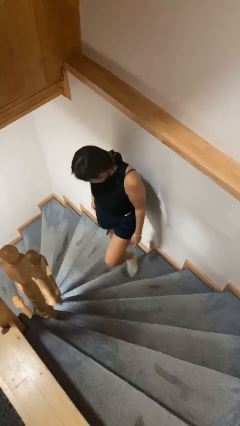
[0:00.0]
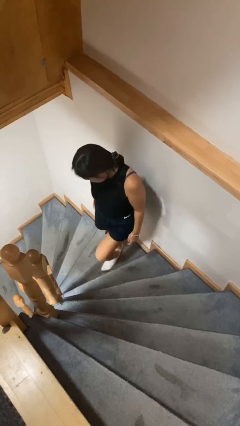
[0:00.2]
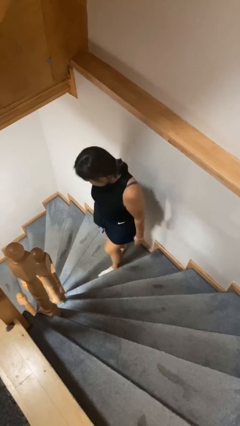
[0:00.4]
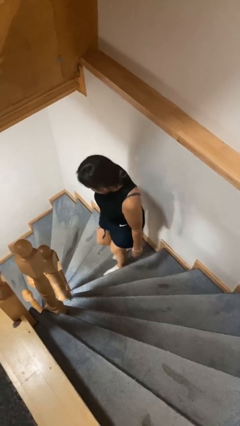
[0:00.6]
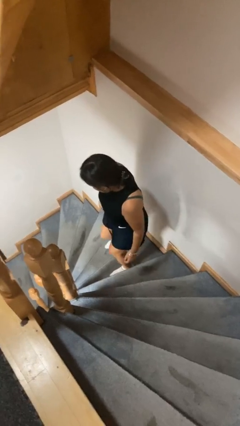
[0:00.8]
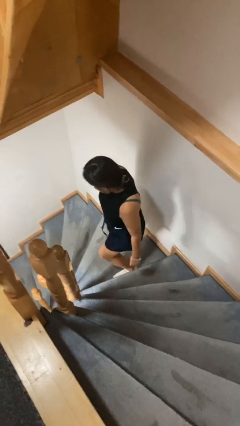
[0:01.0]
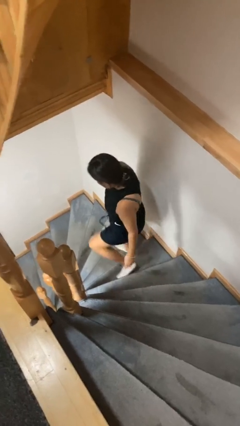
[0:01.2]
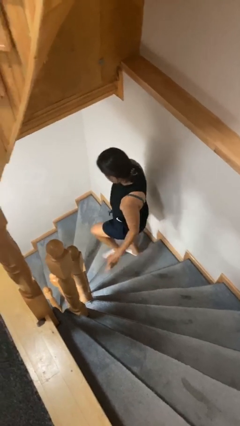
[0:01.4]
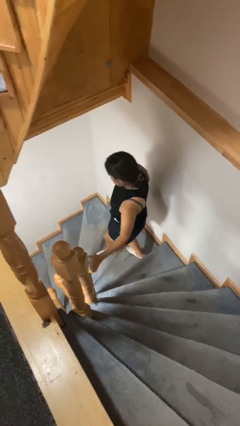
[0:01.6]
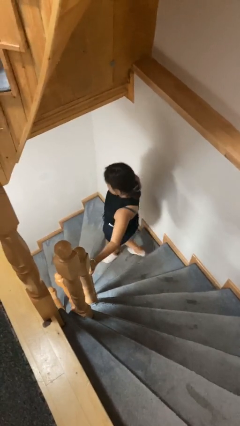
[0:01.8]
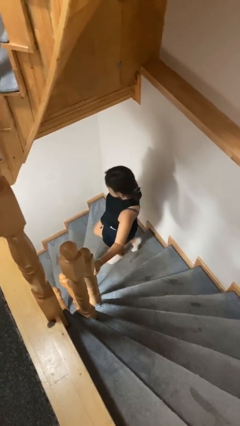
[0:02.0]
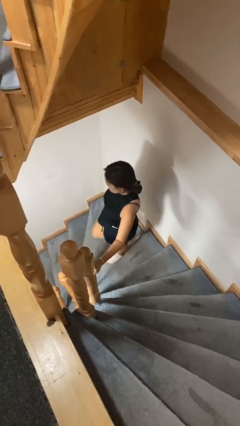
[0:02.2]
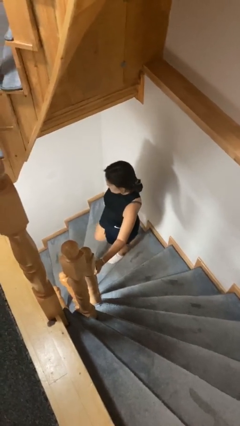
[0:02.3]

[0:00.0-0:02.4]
person climbs down stairs

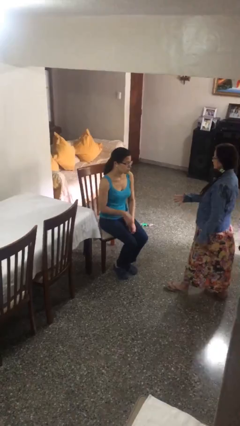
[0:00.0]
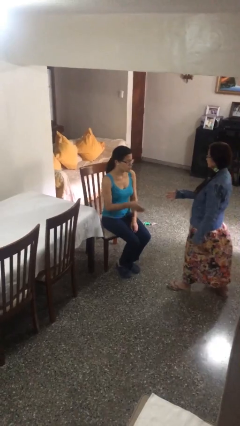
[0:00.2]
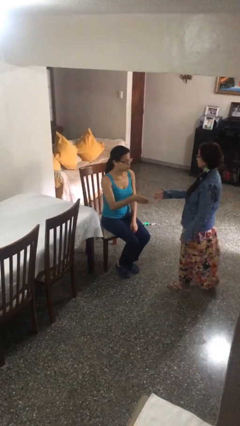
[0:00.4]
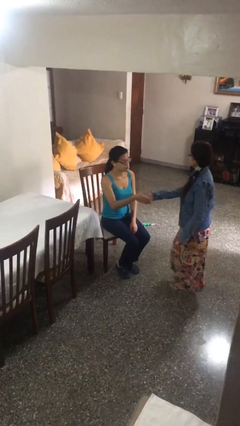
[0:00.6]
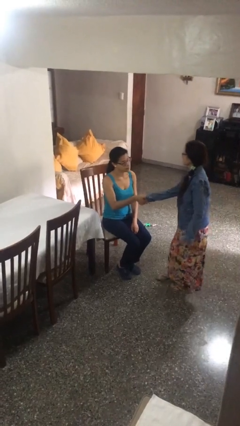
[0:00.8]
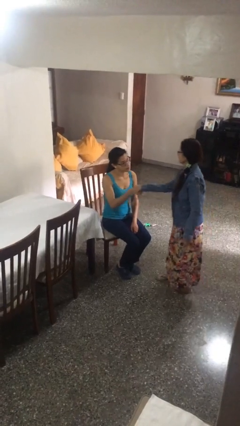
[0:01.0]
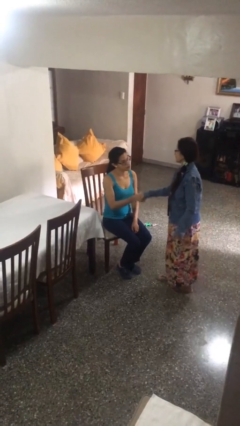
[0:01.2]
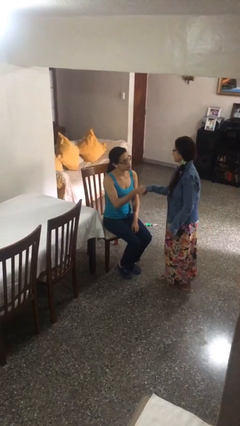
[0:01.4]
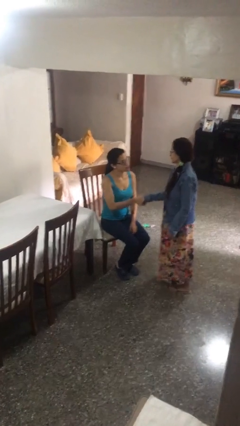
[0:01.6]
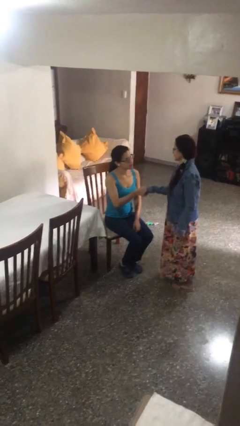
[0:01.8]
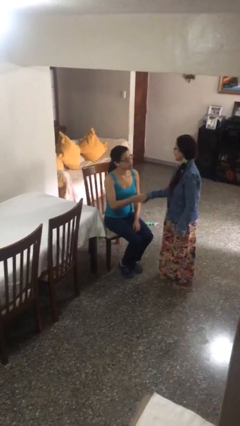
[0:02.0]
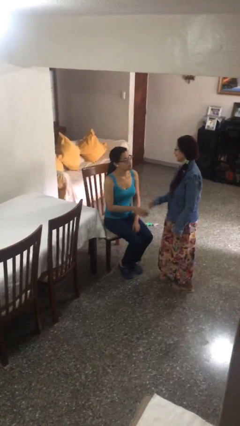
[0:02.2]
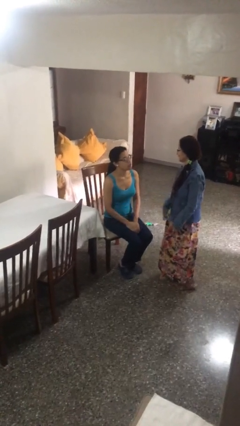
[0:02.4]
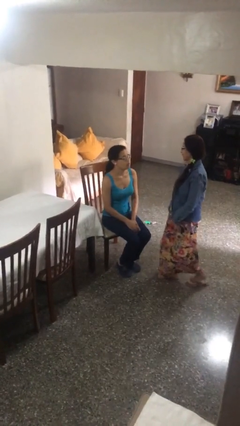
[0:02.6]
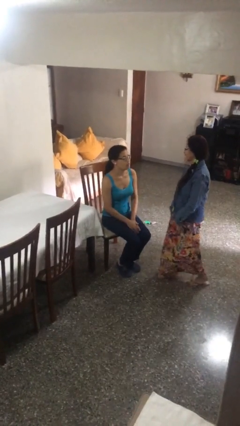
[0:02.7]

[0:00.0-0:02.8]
person shakes hand

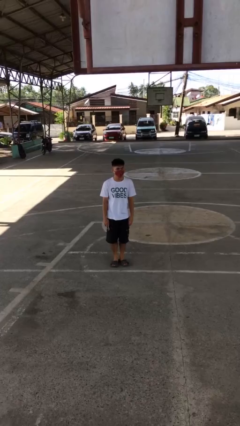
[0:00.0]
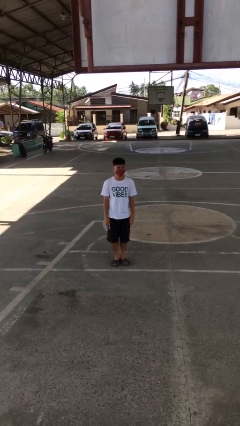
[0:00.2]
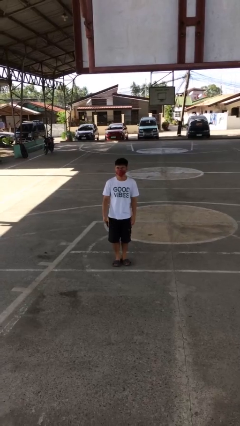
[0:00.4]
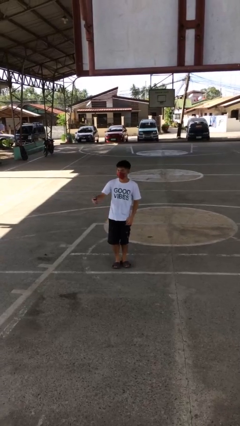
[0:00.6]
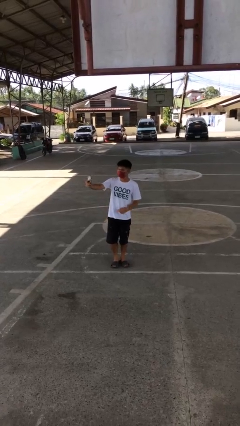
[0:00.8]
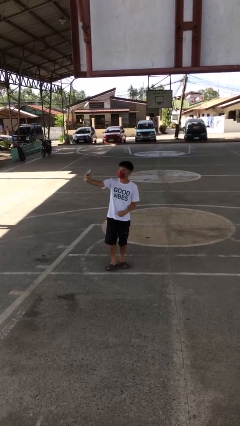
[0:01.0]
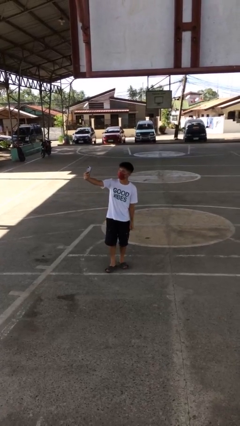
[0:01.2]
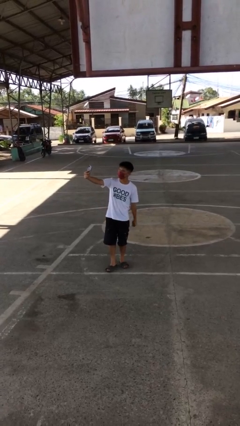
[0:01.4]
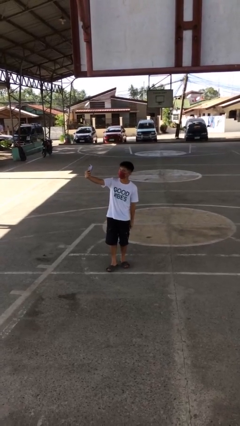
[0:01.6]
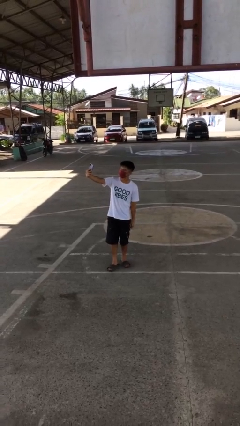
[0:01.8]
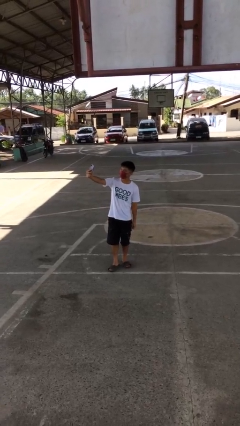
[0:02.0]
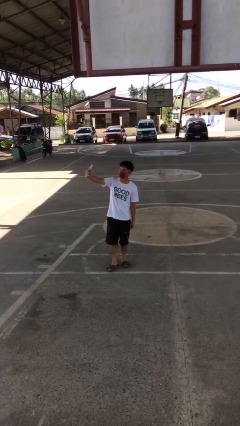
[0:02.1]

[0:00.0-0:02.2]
person takes selfie

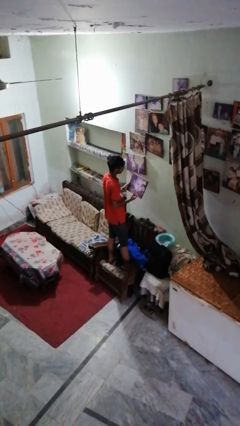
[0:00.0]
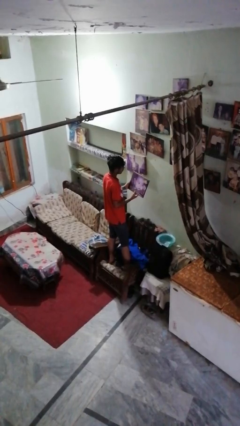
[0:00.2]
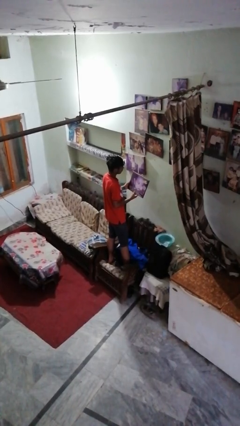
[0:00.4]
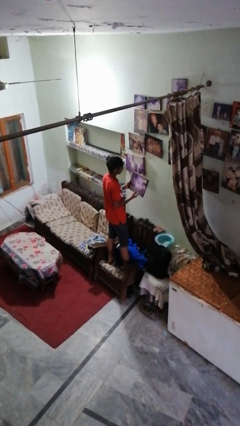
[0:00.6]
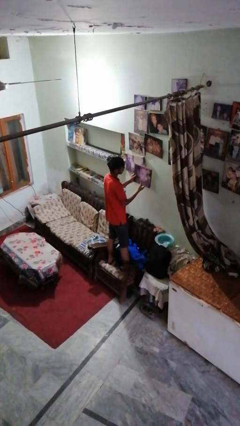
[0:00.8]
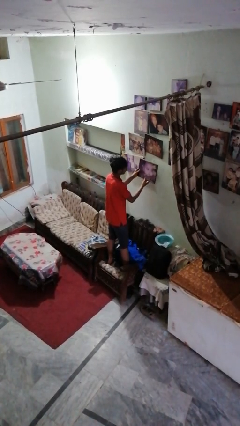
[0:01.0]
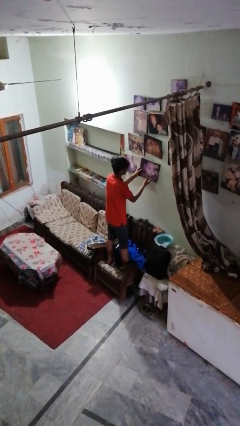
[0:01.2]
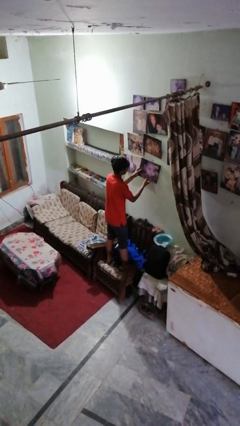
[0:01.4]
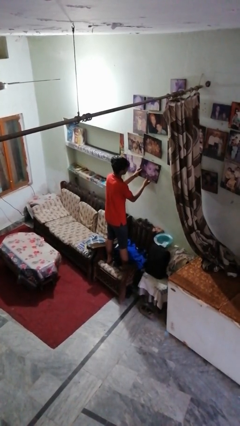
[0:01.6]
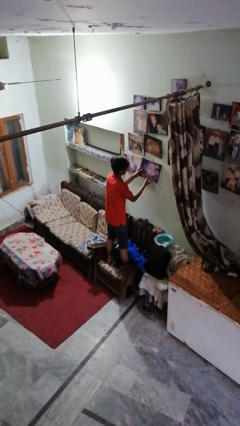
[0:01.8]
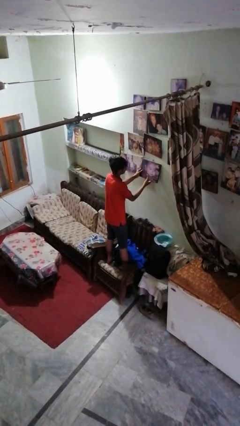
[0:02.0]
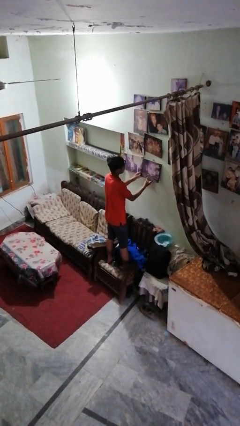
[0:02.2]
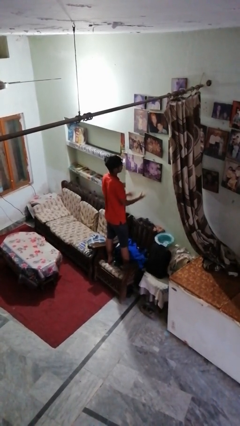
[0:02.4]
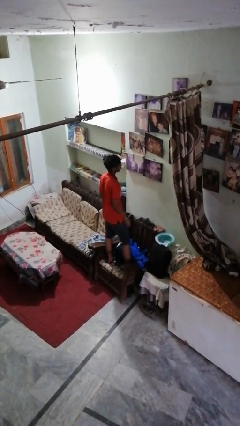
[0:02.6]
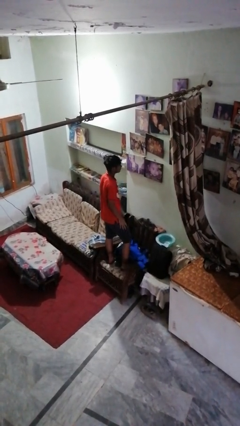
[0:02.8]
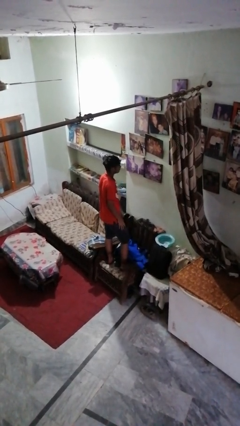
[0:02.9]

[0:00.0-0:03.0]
person puts up picture frame

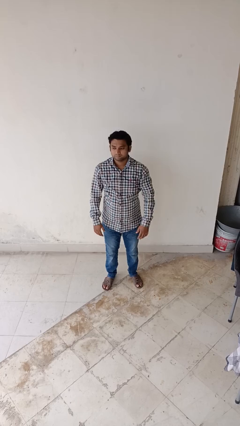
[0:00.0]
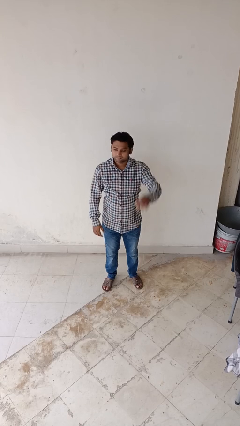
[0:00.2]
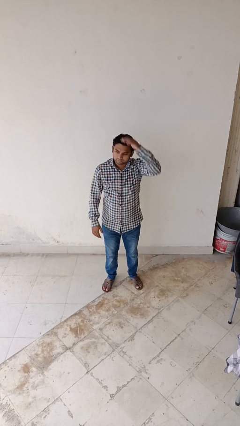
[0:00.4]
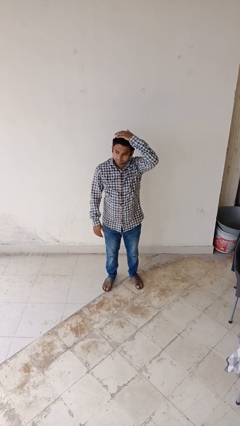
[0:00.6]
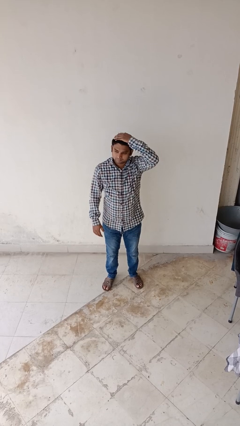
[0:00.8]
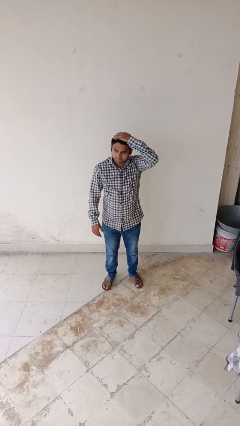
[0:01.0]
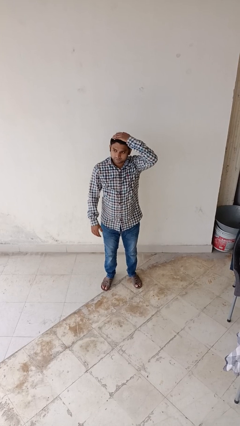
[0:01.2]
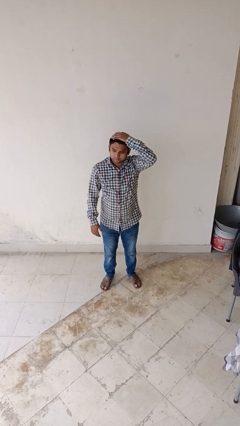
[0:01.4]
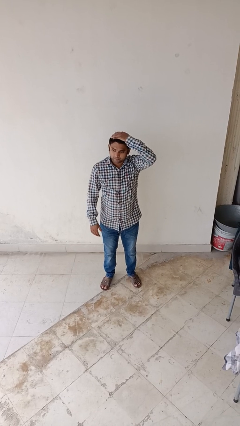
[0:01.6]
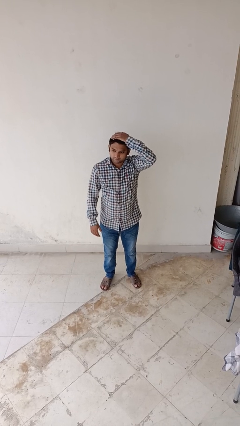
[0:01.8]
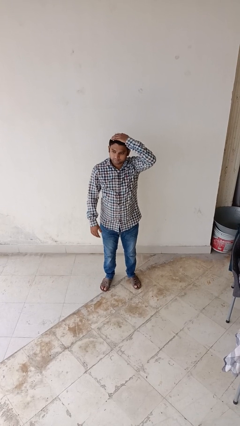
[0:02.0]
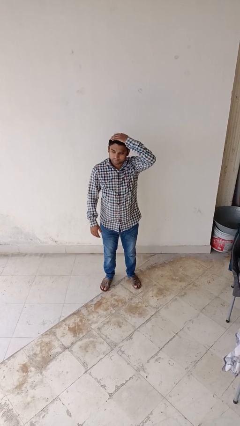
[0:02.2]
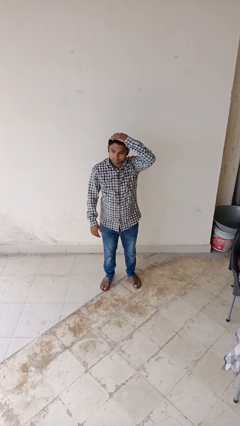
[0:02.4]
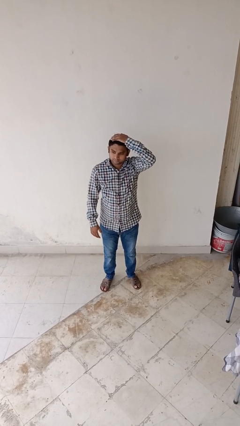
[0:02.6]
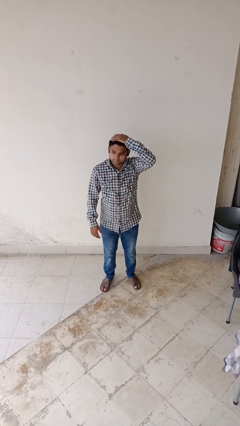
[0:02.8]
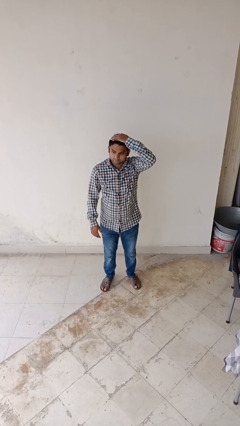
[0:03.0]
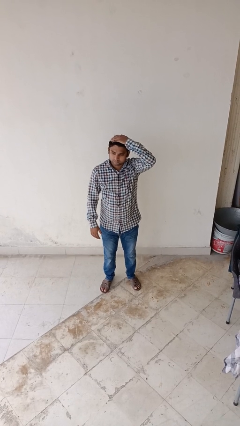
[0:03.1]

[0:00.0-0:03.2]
person pats head

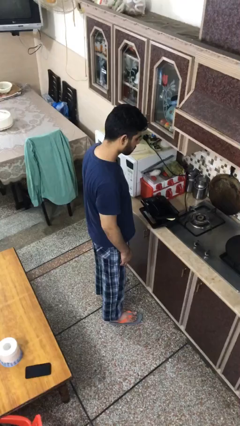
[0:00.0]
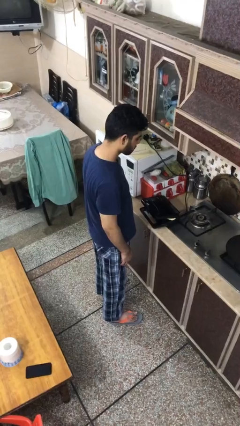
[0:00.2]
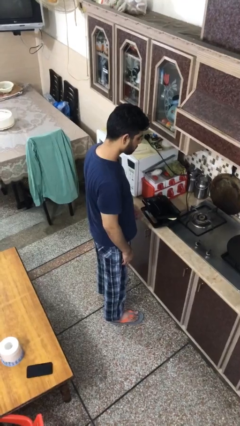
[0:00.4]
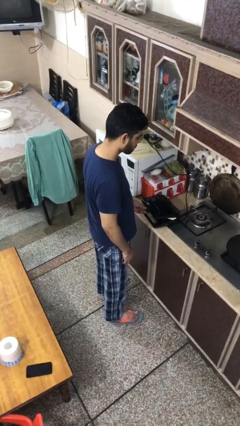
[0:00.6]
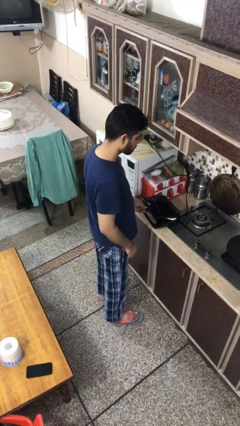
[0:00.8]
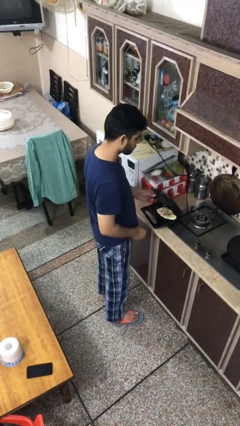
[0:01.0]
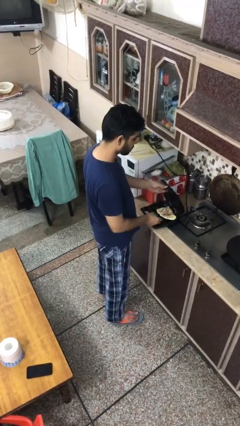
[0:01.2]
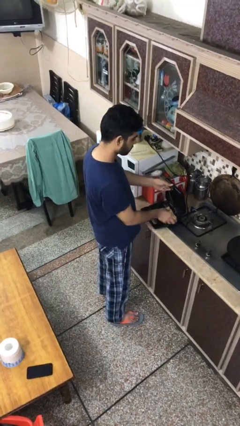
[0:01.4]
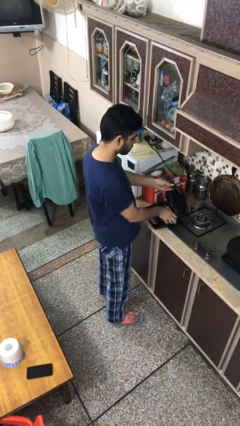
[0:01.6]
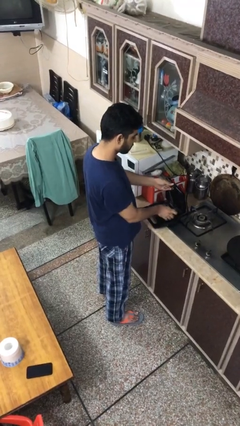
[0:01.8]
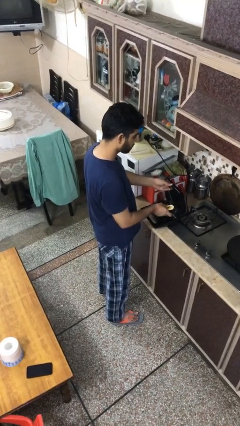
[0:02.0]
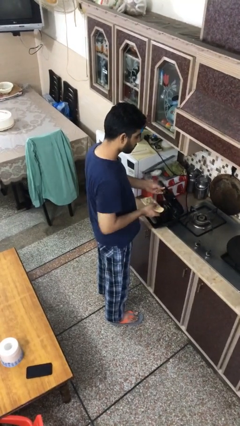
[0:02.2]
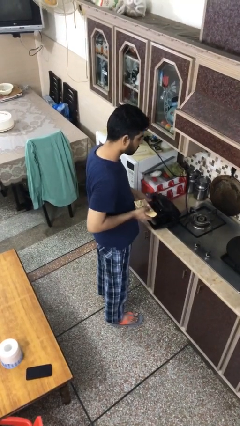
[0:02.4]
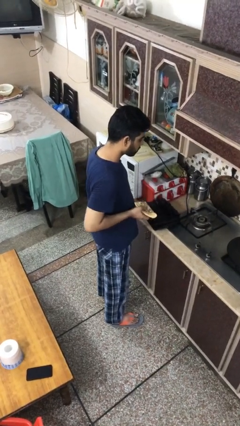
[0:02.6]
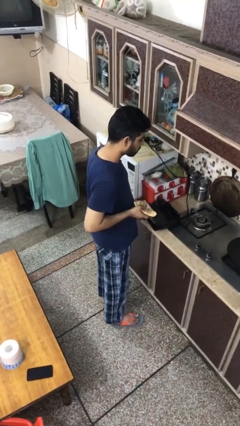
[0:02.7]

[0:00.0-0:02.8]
person takes object from toaster

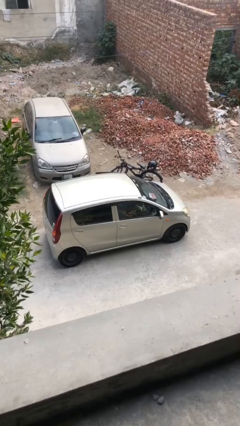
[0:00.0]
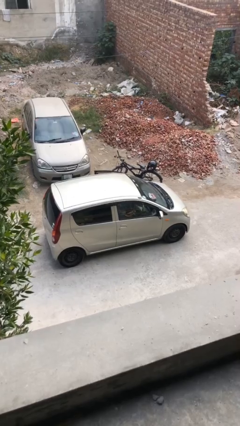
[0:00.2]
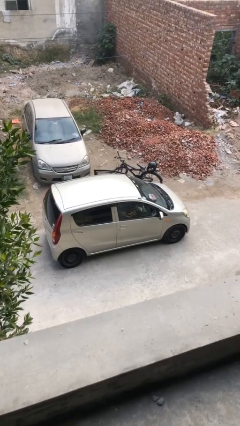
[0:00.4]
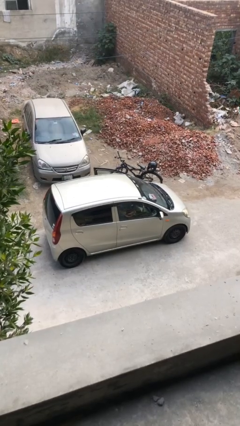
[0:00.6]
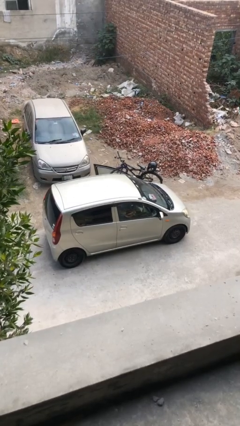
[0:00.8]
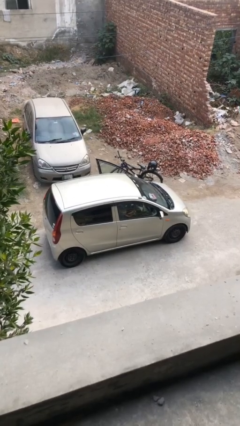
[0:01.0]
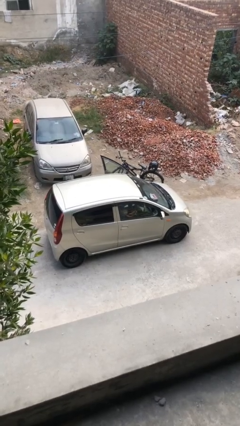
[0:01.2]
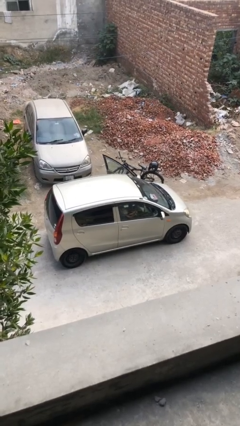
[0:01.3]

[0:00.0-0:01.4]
car drops off person
